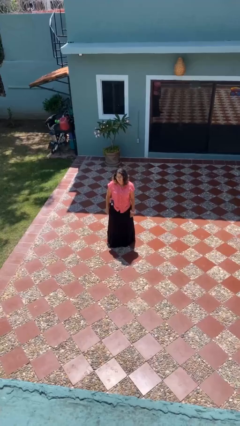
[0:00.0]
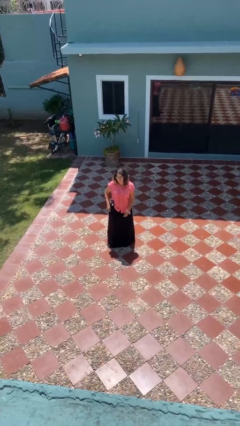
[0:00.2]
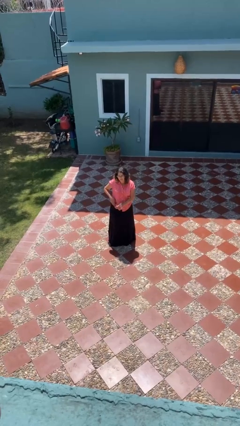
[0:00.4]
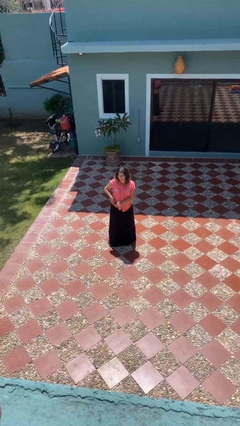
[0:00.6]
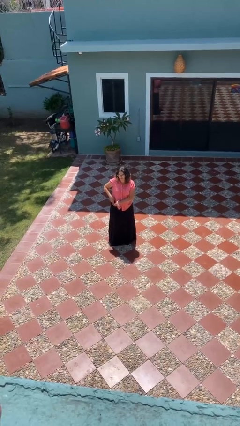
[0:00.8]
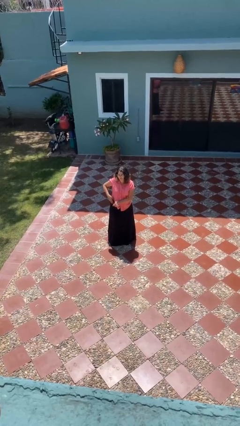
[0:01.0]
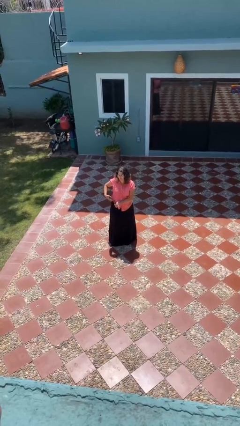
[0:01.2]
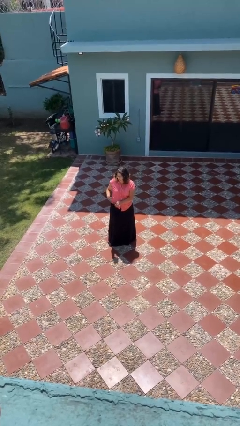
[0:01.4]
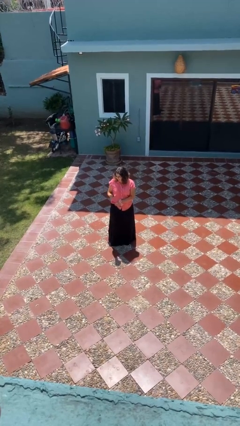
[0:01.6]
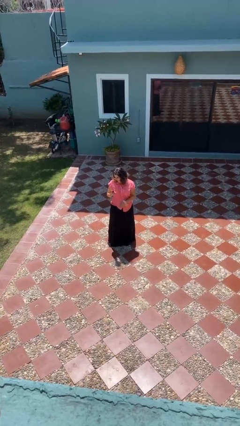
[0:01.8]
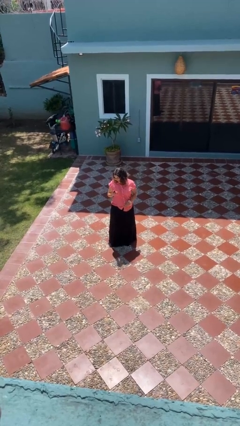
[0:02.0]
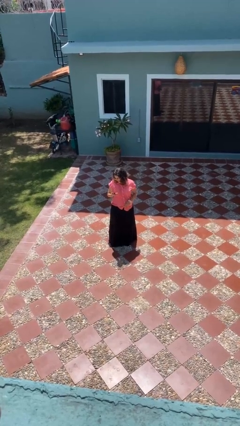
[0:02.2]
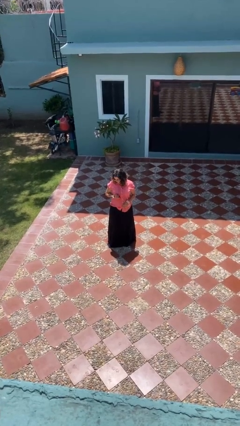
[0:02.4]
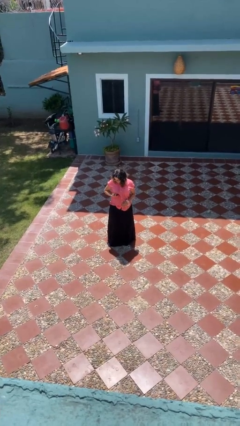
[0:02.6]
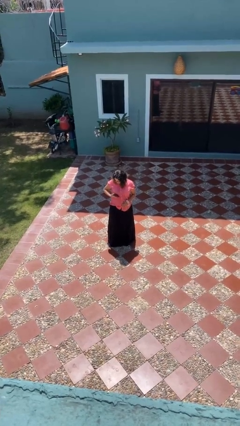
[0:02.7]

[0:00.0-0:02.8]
person takes phone from pocket

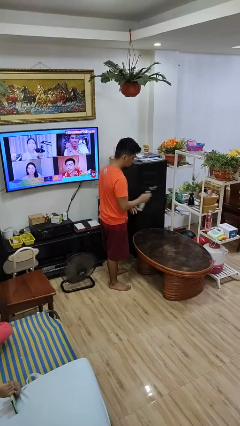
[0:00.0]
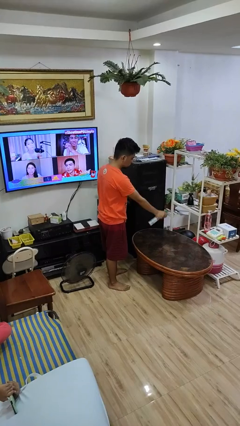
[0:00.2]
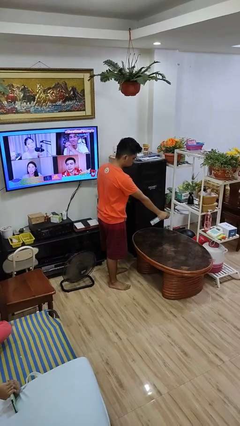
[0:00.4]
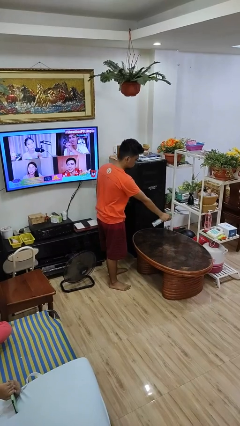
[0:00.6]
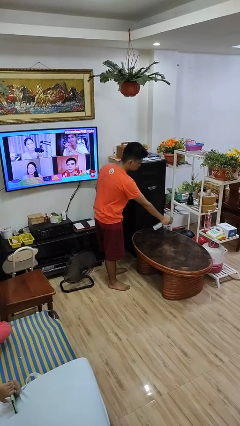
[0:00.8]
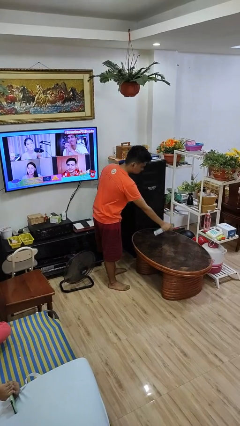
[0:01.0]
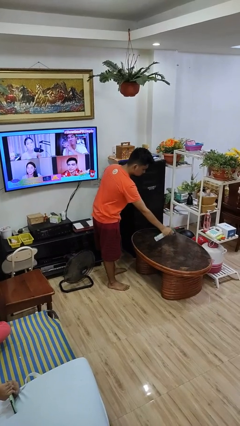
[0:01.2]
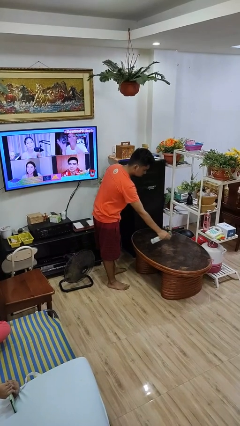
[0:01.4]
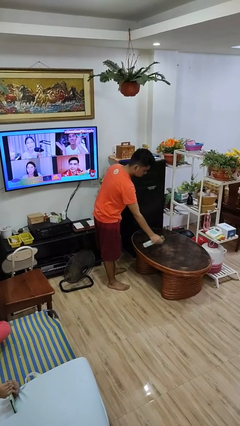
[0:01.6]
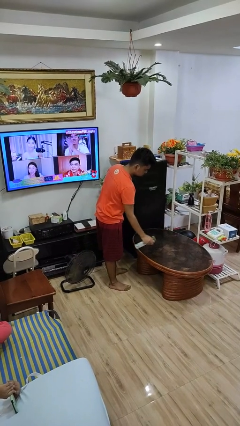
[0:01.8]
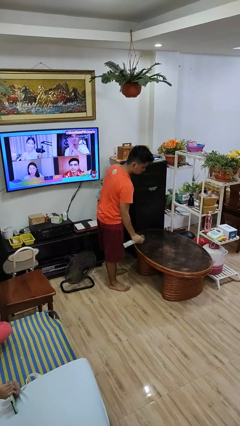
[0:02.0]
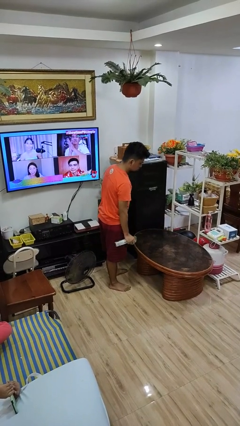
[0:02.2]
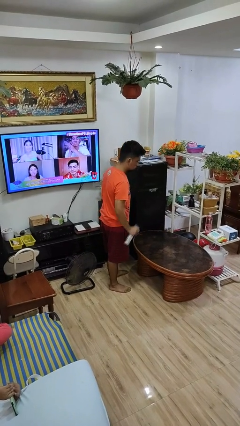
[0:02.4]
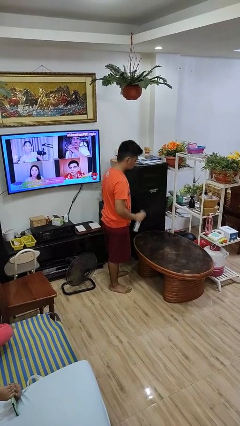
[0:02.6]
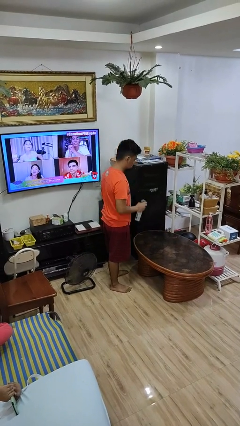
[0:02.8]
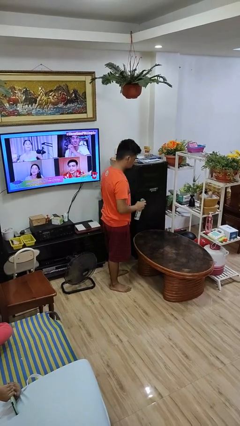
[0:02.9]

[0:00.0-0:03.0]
person sprays from bottle

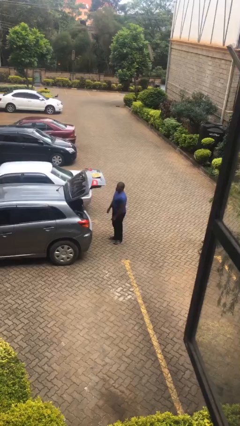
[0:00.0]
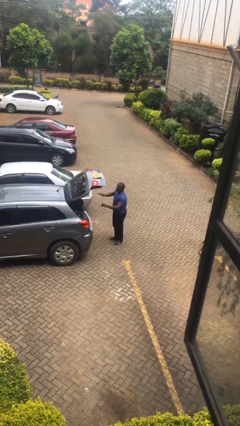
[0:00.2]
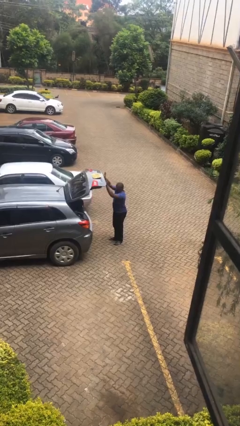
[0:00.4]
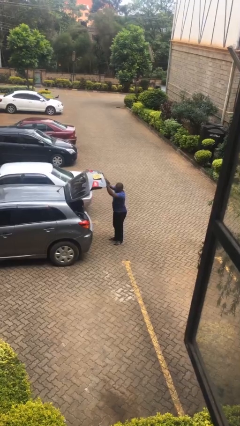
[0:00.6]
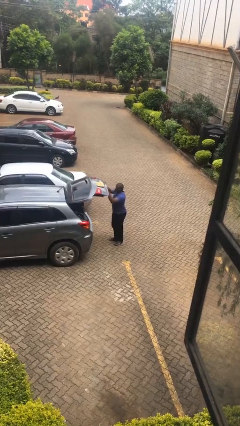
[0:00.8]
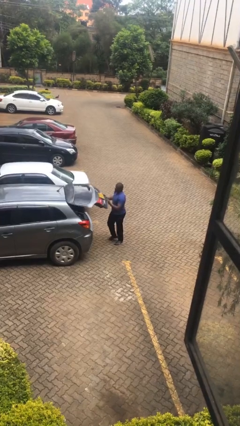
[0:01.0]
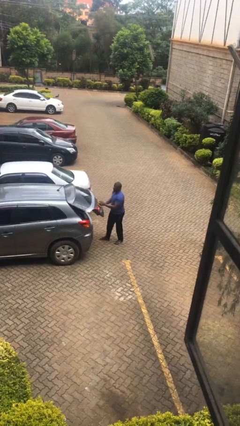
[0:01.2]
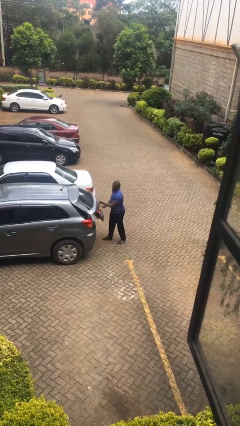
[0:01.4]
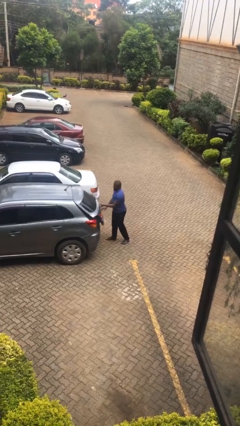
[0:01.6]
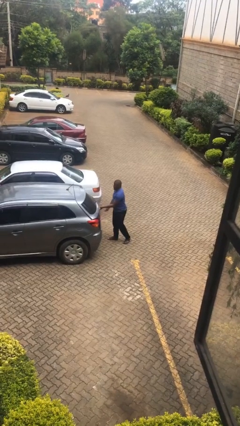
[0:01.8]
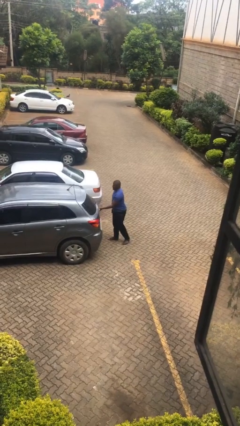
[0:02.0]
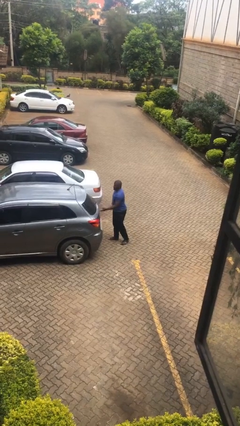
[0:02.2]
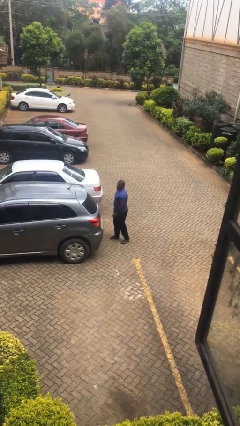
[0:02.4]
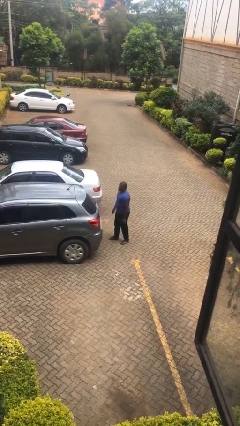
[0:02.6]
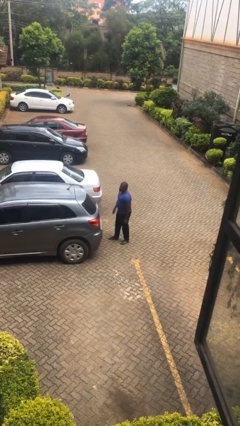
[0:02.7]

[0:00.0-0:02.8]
person closes car trunk

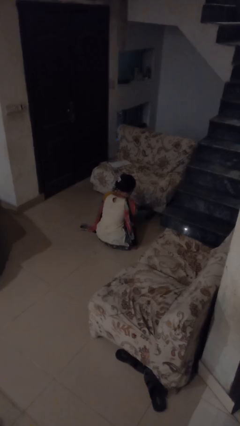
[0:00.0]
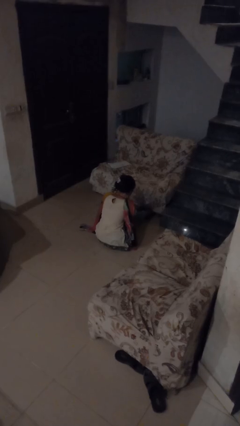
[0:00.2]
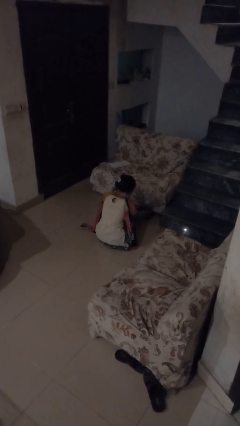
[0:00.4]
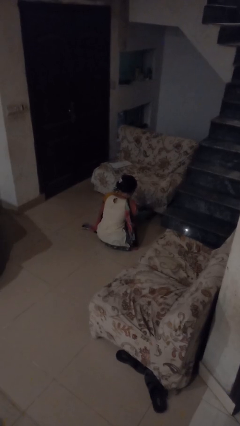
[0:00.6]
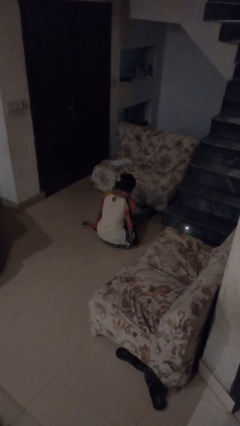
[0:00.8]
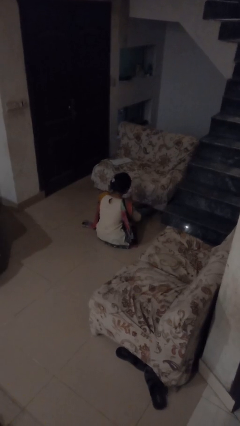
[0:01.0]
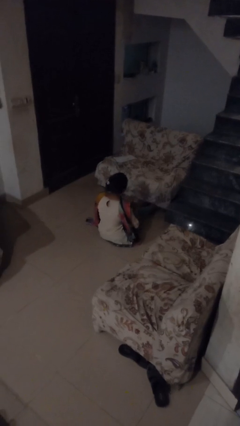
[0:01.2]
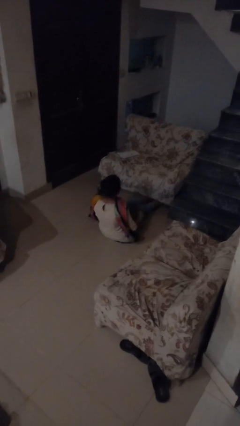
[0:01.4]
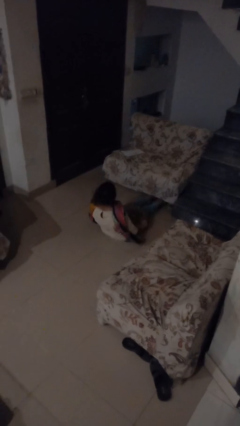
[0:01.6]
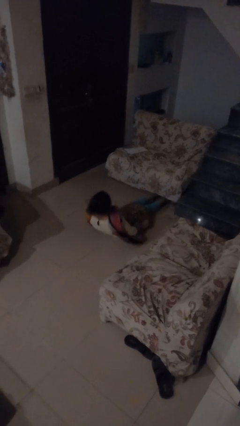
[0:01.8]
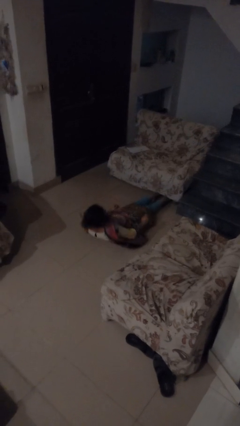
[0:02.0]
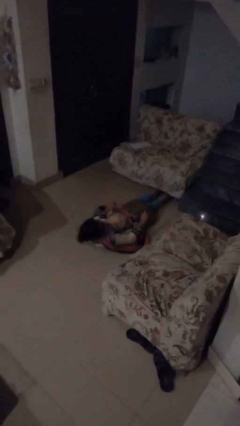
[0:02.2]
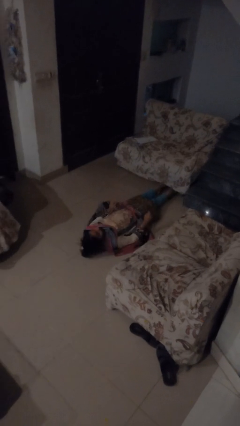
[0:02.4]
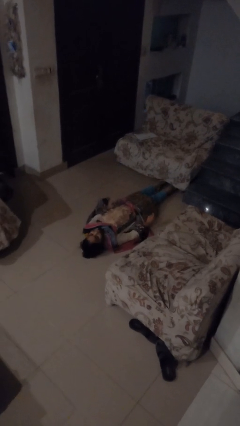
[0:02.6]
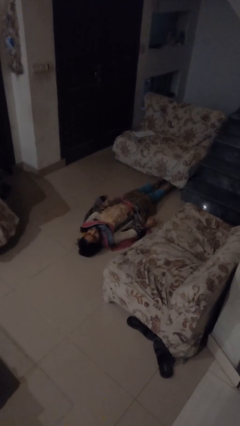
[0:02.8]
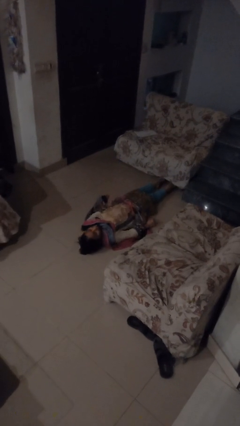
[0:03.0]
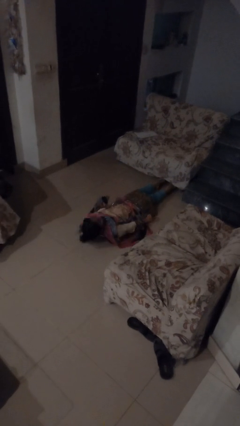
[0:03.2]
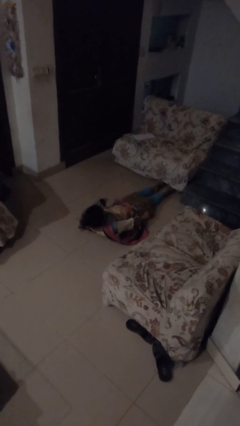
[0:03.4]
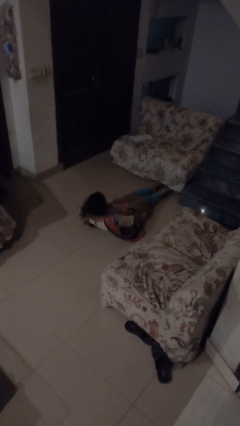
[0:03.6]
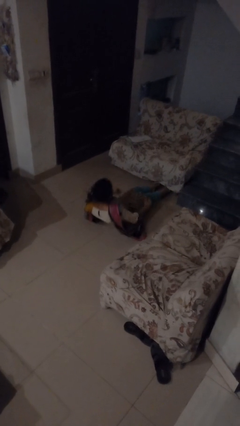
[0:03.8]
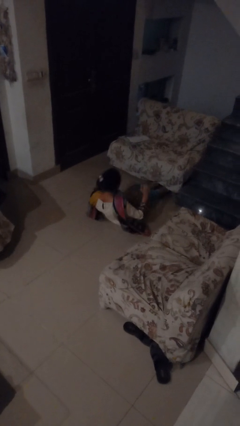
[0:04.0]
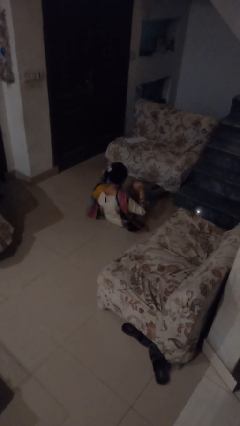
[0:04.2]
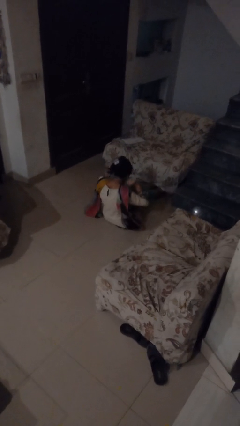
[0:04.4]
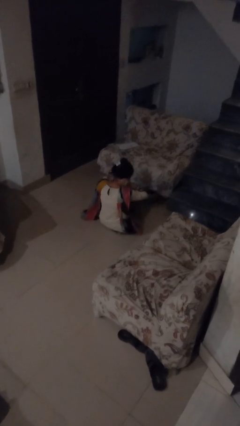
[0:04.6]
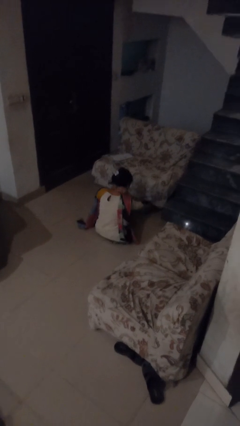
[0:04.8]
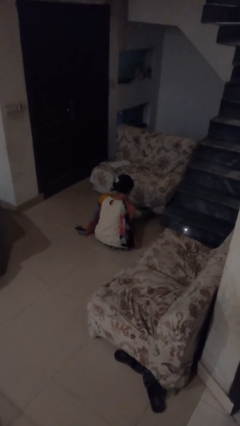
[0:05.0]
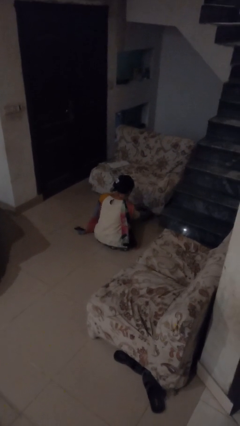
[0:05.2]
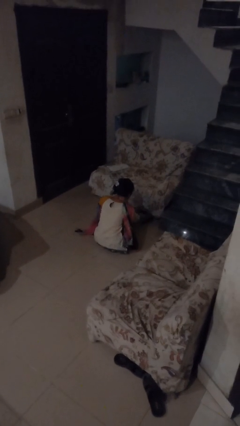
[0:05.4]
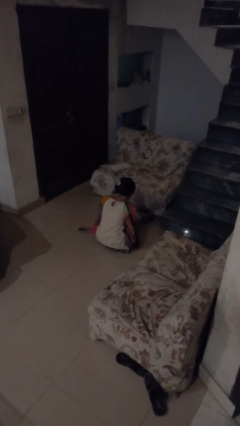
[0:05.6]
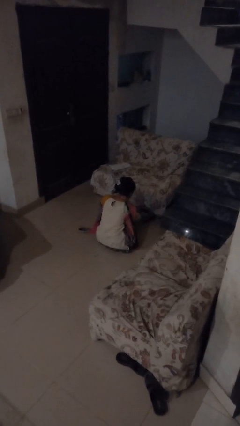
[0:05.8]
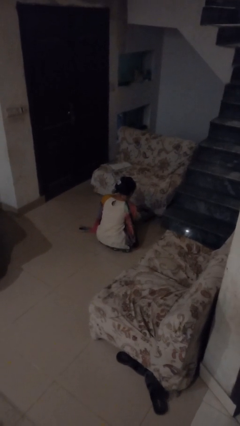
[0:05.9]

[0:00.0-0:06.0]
person exercises with situp

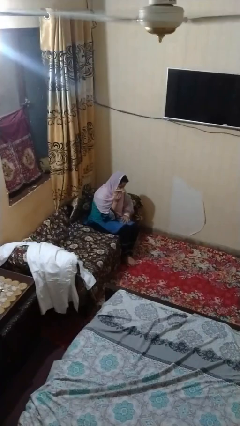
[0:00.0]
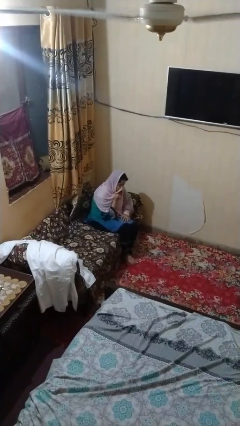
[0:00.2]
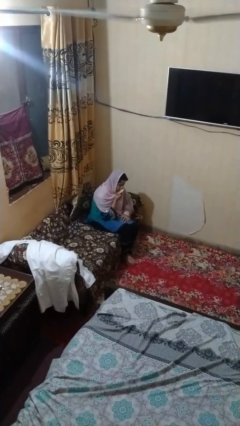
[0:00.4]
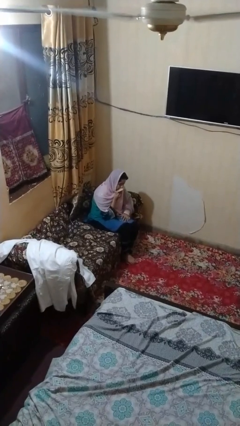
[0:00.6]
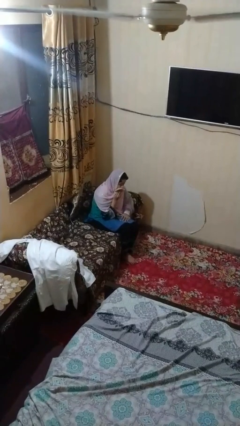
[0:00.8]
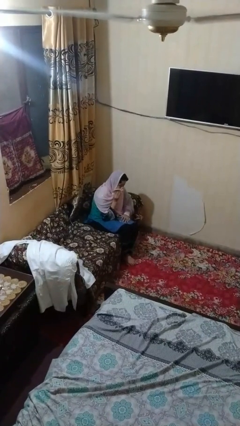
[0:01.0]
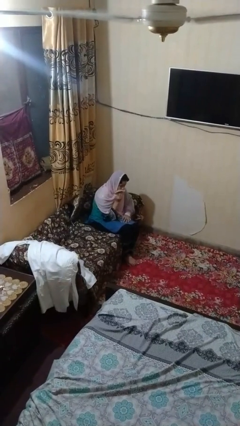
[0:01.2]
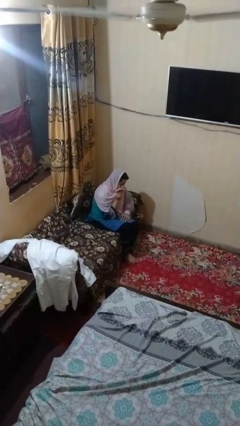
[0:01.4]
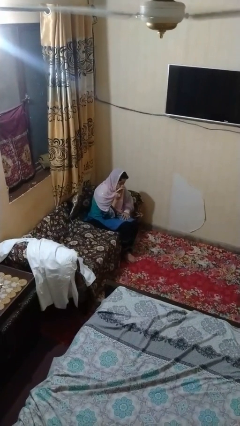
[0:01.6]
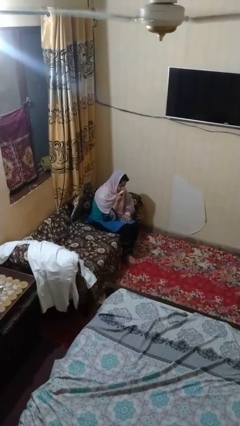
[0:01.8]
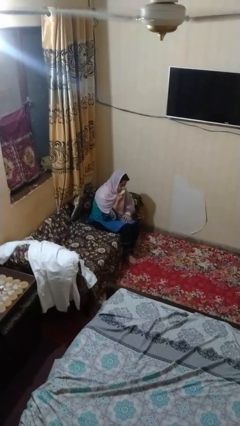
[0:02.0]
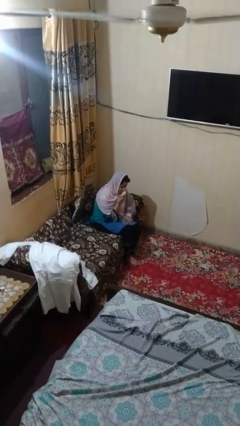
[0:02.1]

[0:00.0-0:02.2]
person wipes mouth with napkin

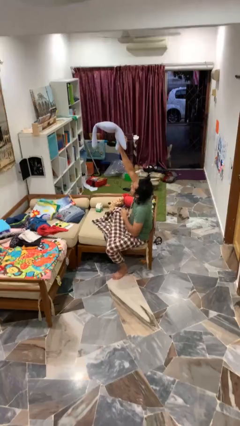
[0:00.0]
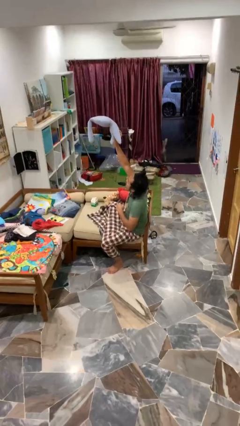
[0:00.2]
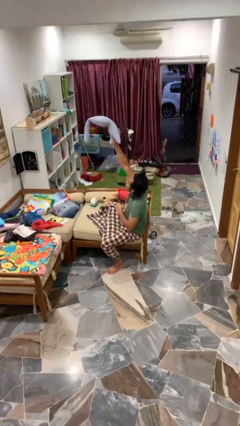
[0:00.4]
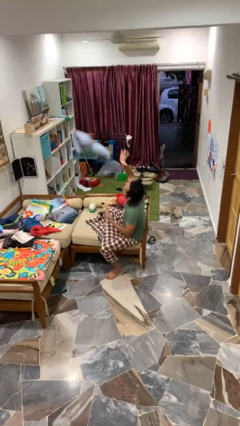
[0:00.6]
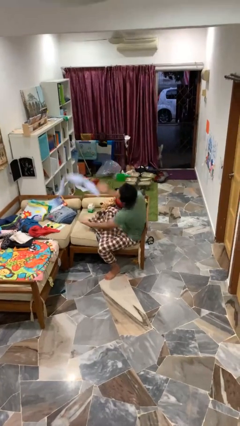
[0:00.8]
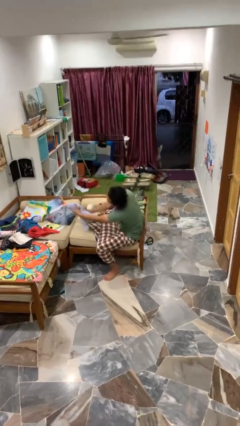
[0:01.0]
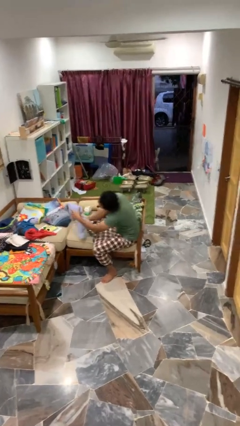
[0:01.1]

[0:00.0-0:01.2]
person drops object
